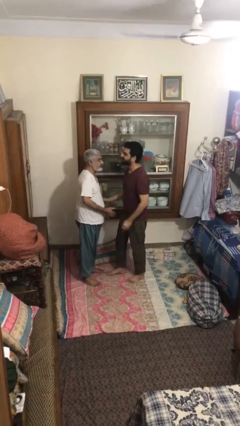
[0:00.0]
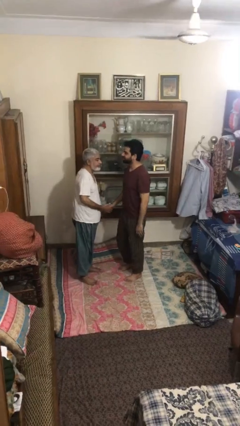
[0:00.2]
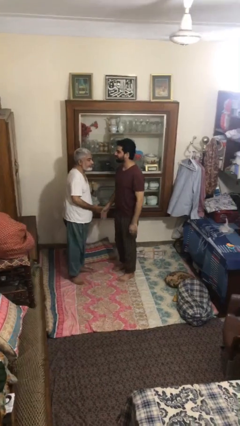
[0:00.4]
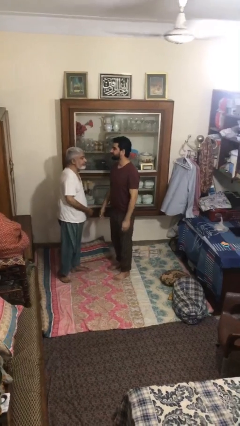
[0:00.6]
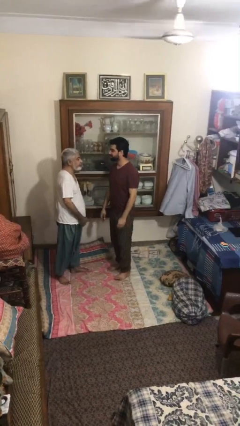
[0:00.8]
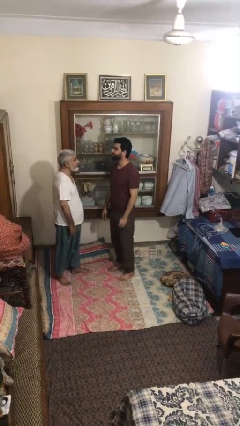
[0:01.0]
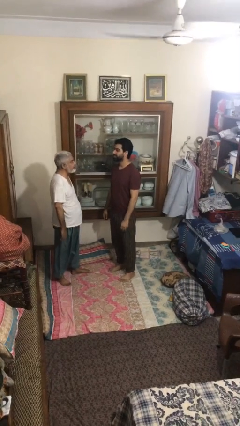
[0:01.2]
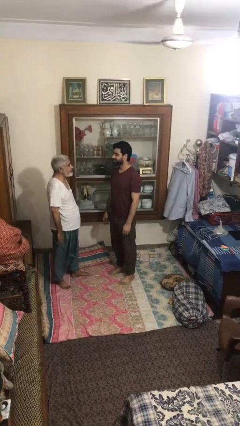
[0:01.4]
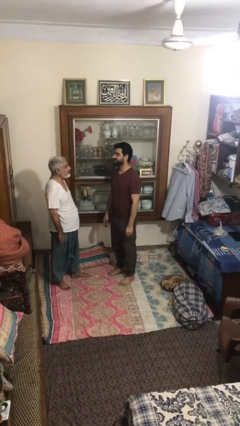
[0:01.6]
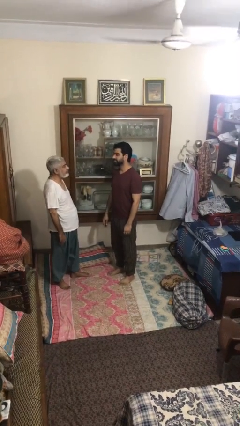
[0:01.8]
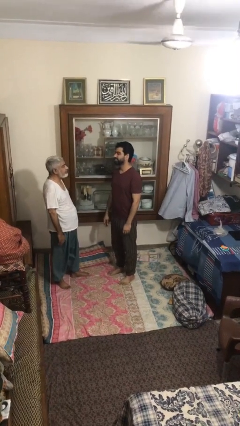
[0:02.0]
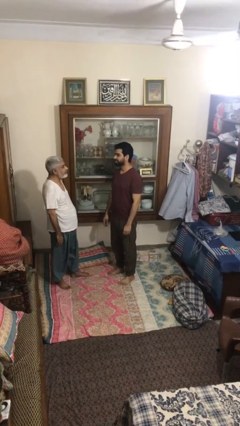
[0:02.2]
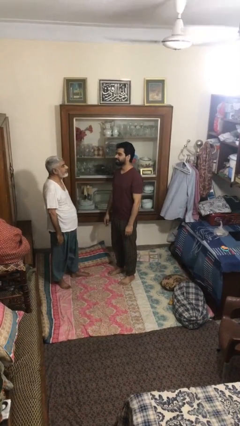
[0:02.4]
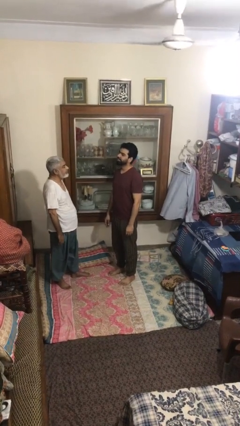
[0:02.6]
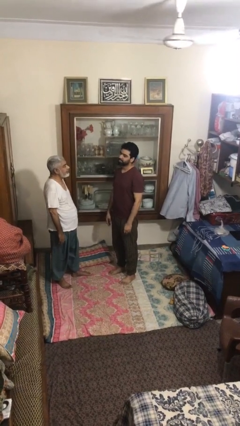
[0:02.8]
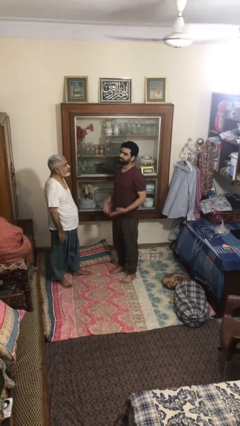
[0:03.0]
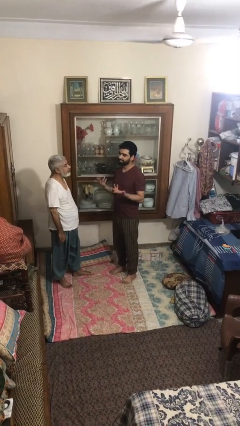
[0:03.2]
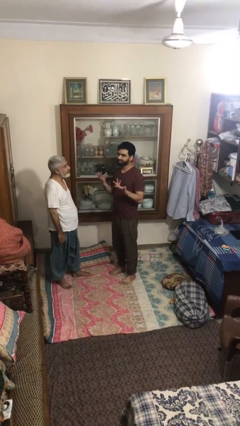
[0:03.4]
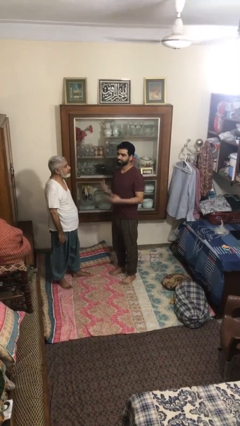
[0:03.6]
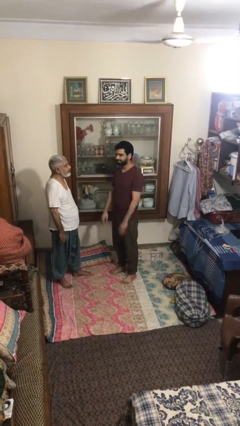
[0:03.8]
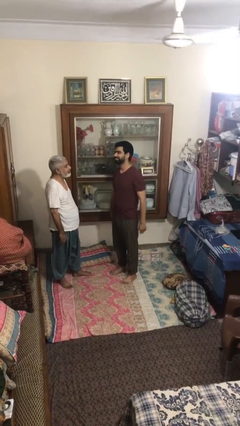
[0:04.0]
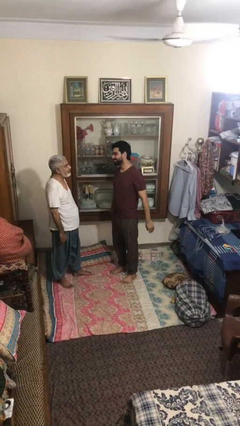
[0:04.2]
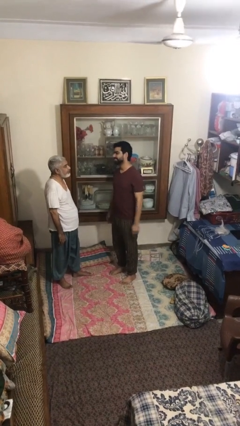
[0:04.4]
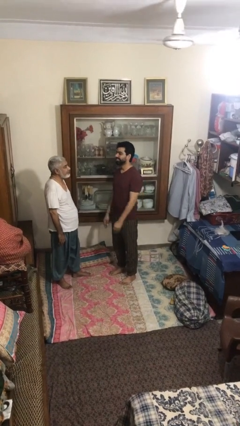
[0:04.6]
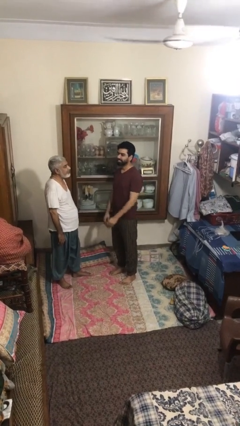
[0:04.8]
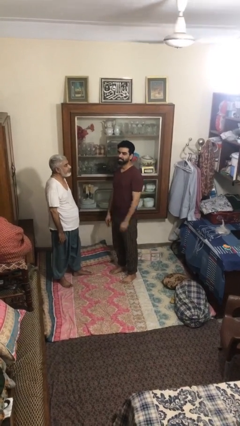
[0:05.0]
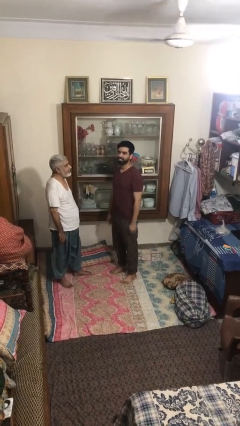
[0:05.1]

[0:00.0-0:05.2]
person talks to person

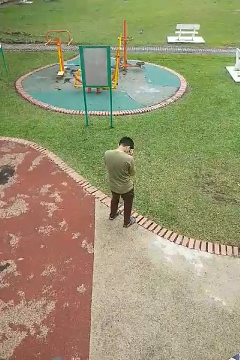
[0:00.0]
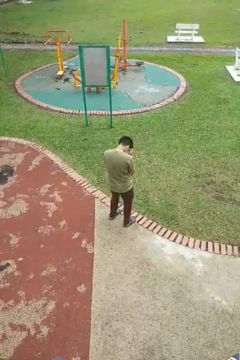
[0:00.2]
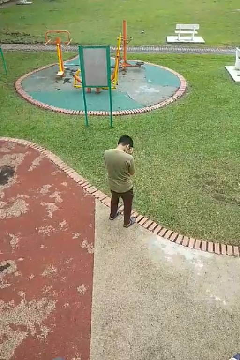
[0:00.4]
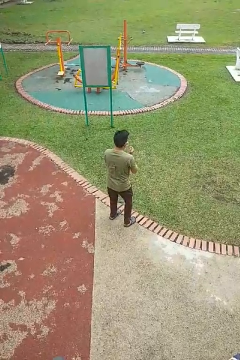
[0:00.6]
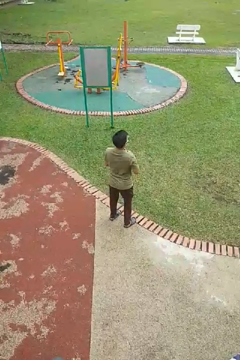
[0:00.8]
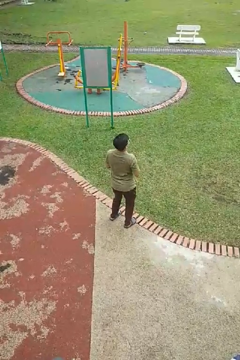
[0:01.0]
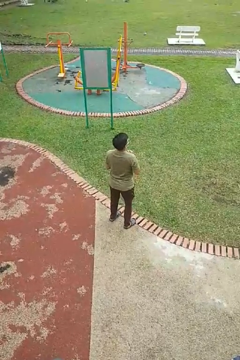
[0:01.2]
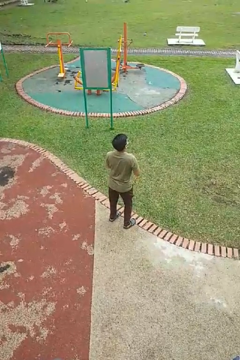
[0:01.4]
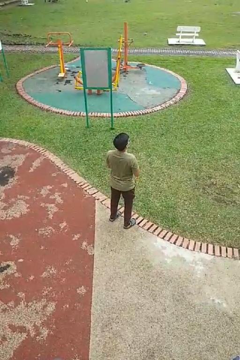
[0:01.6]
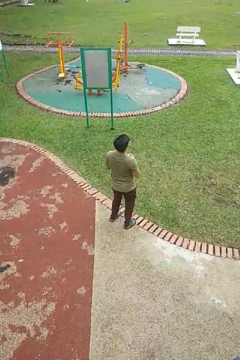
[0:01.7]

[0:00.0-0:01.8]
person wiggles hips

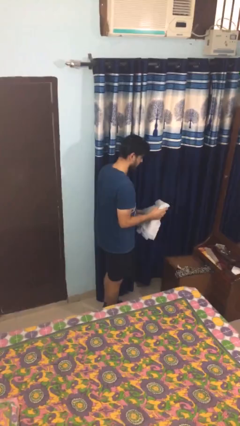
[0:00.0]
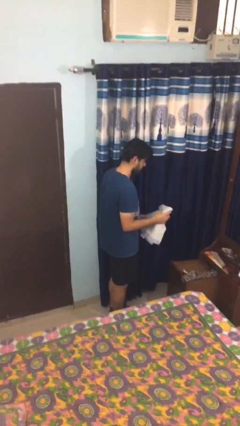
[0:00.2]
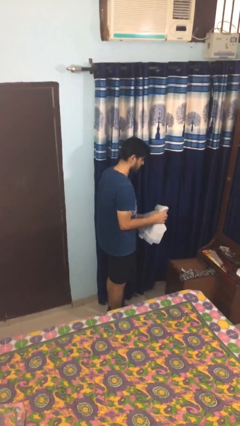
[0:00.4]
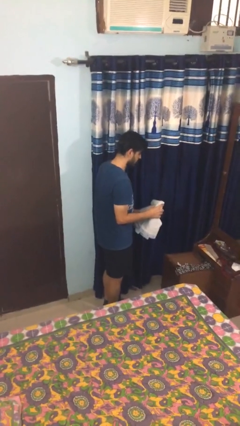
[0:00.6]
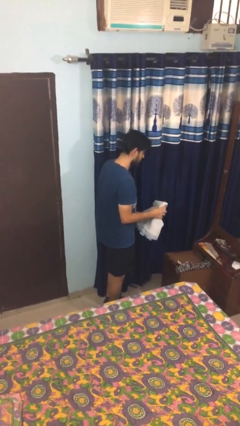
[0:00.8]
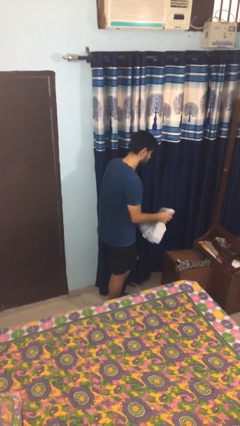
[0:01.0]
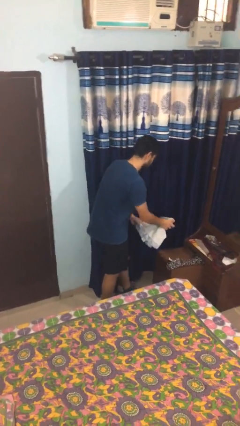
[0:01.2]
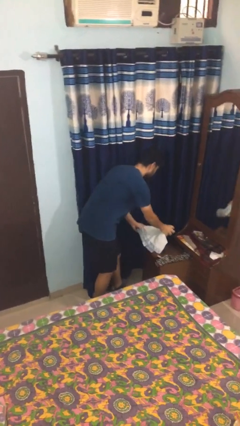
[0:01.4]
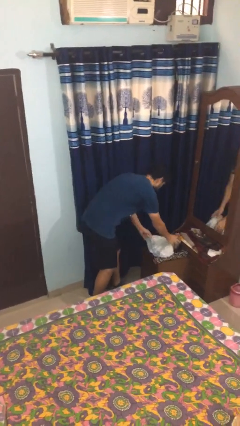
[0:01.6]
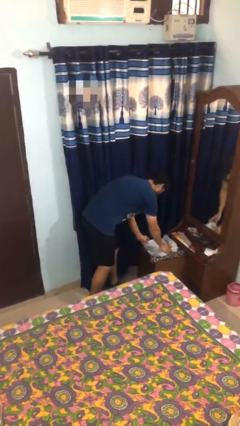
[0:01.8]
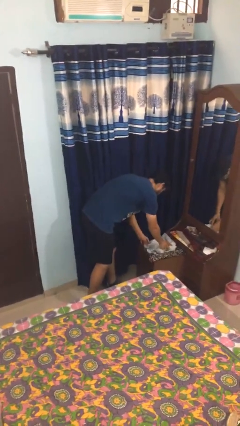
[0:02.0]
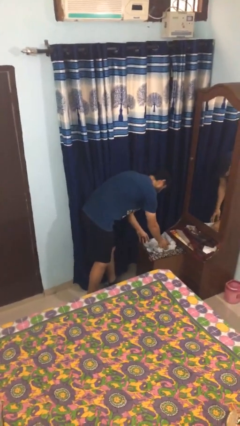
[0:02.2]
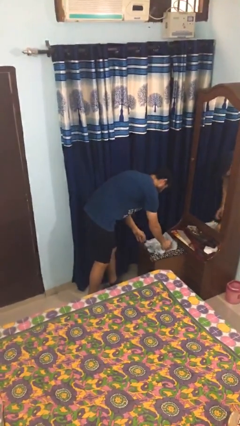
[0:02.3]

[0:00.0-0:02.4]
person puts clothes into dresser

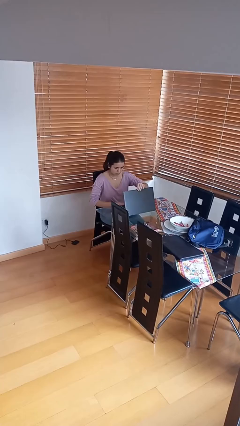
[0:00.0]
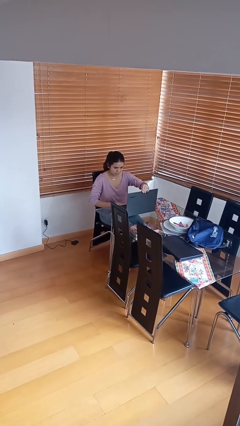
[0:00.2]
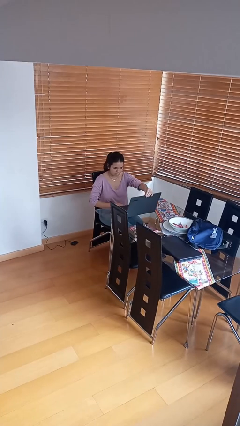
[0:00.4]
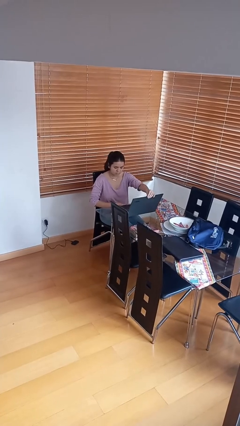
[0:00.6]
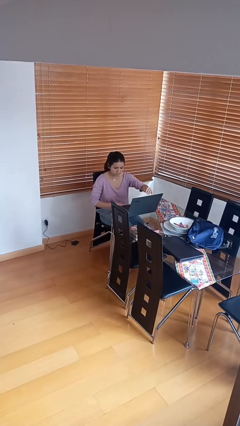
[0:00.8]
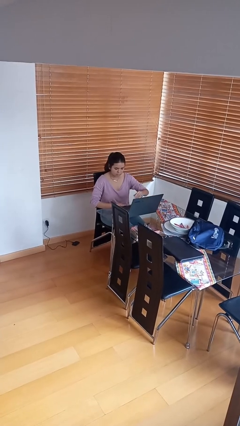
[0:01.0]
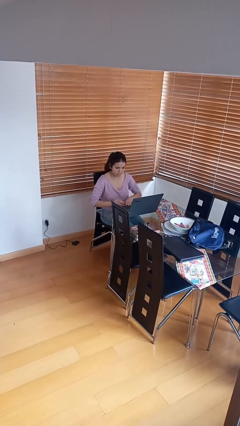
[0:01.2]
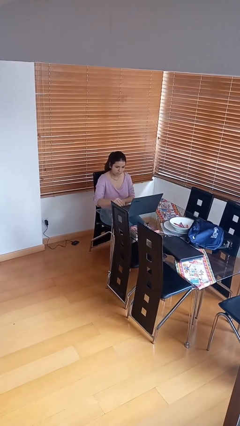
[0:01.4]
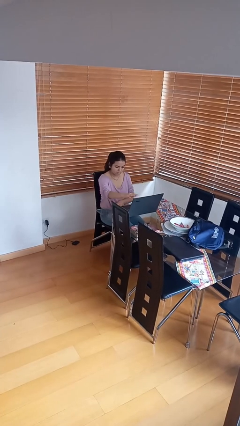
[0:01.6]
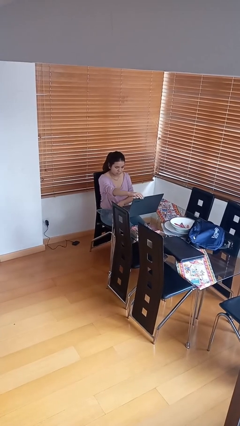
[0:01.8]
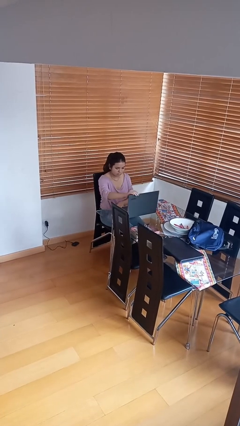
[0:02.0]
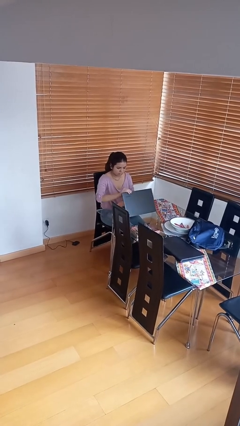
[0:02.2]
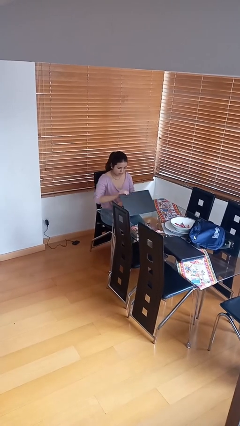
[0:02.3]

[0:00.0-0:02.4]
person interacts with laptop

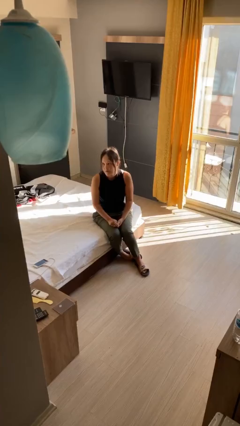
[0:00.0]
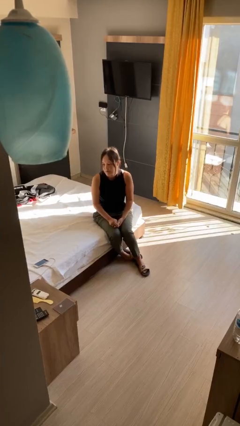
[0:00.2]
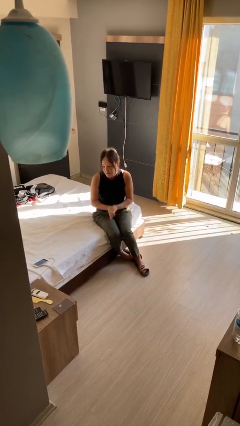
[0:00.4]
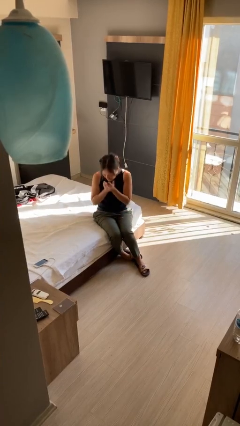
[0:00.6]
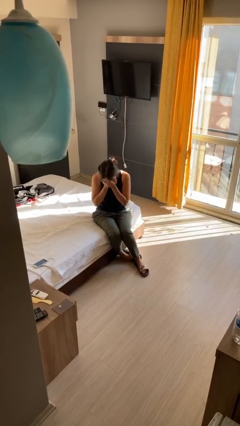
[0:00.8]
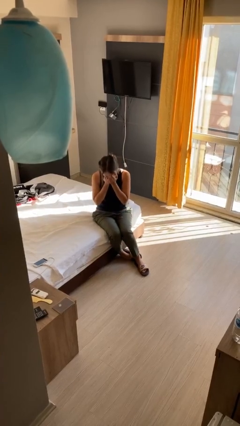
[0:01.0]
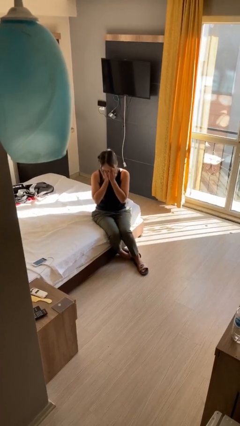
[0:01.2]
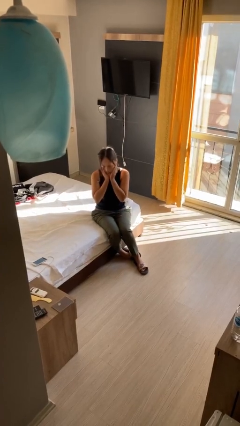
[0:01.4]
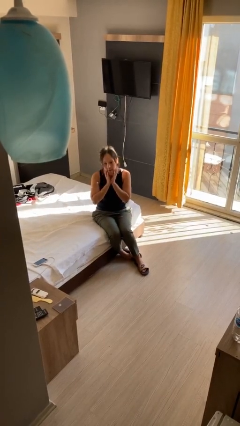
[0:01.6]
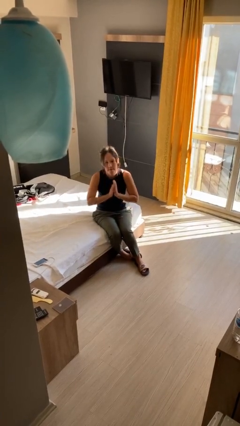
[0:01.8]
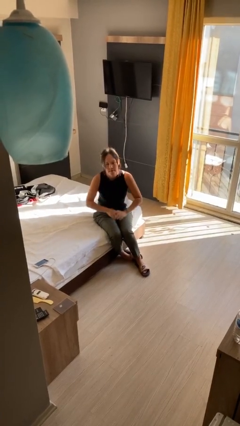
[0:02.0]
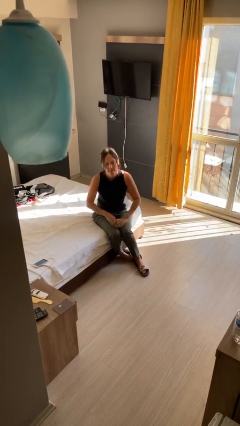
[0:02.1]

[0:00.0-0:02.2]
person sneezes into hand

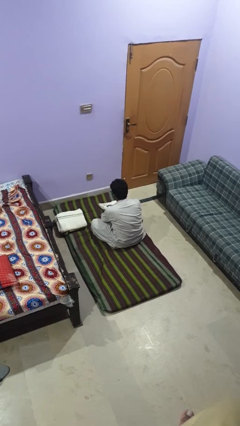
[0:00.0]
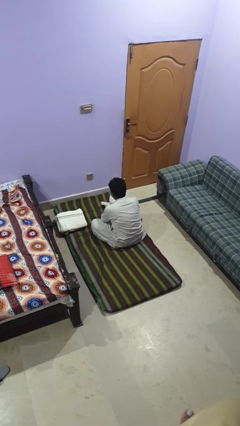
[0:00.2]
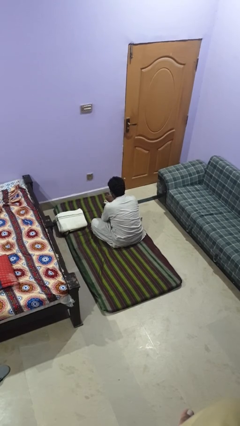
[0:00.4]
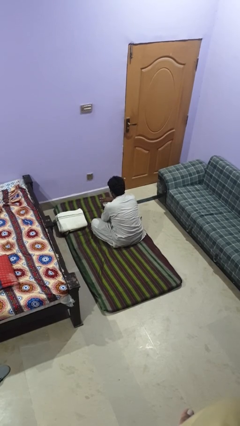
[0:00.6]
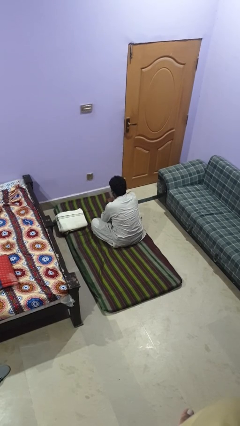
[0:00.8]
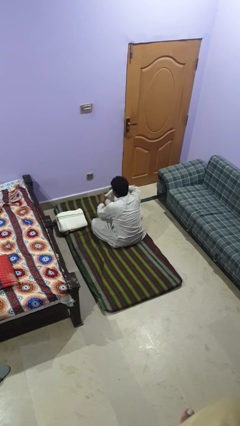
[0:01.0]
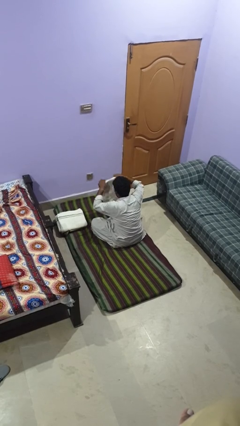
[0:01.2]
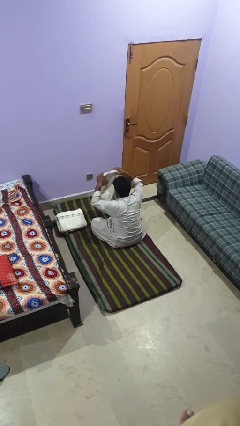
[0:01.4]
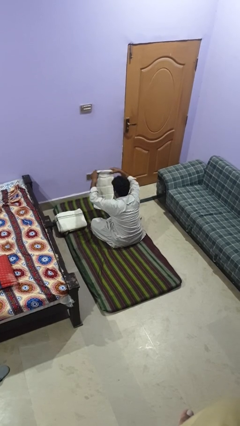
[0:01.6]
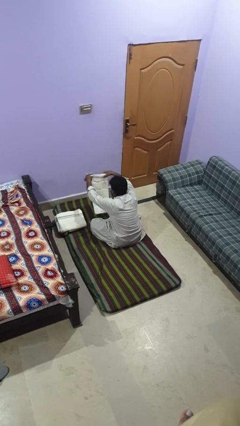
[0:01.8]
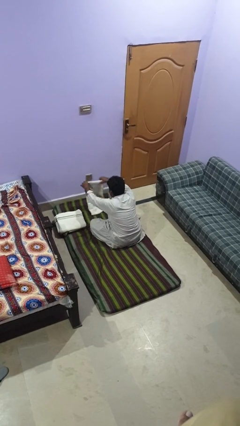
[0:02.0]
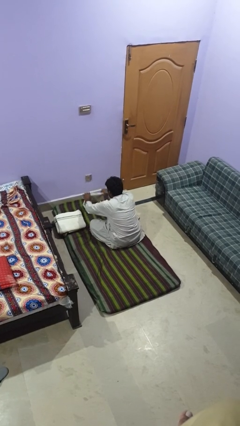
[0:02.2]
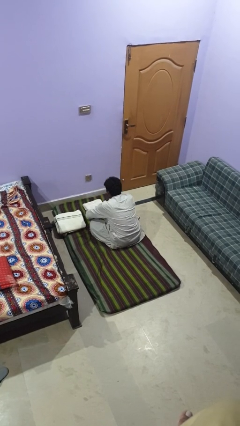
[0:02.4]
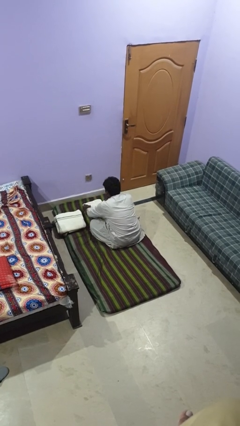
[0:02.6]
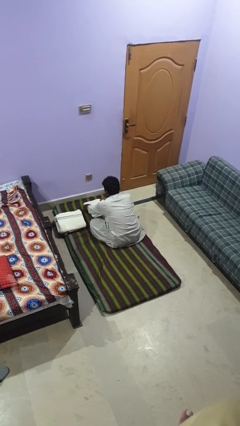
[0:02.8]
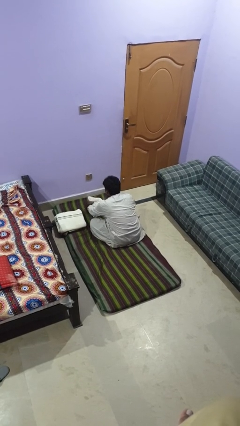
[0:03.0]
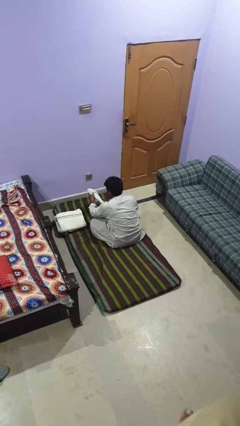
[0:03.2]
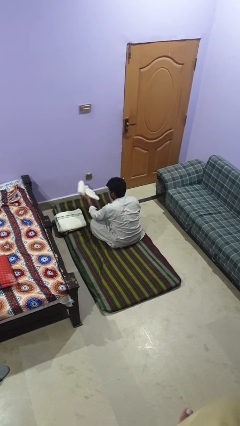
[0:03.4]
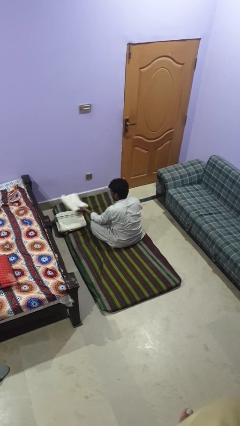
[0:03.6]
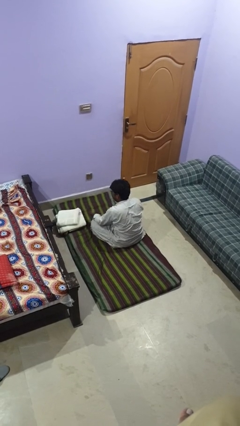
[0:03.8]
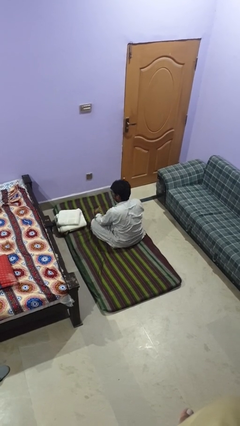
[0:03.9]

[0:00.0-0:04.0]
person folds towel
